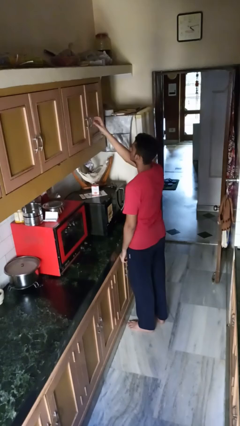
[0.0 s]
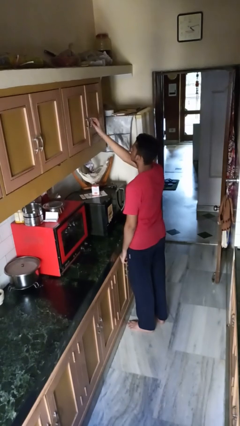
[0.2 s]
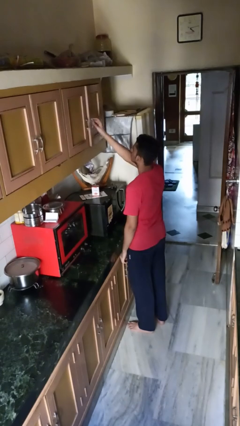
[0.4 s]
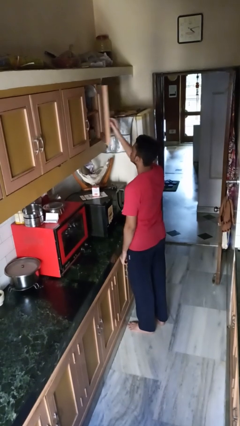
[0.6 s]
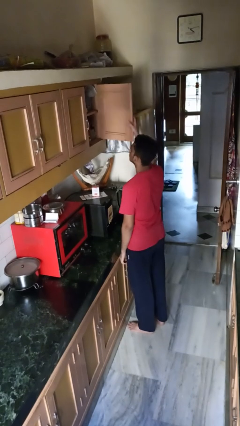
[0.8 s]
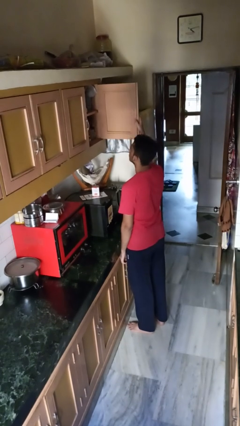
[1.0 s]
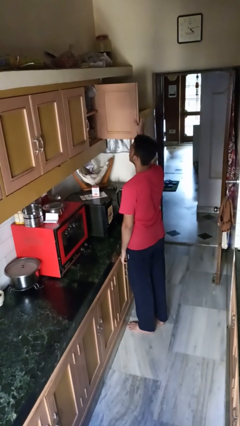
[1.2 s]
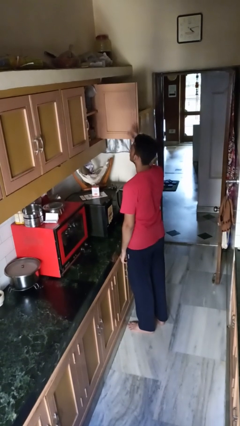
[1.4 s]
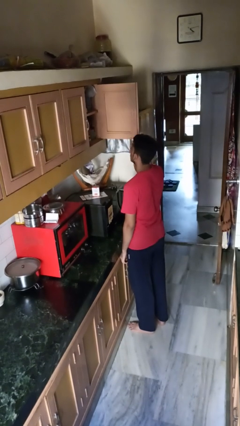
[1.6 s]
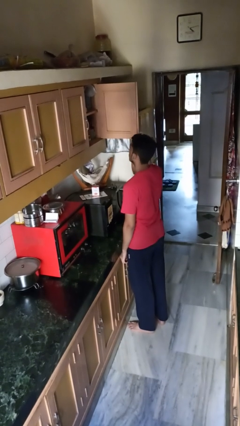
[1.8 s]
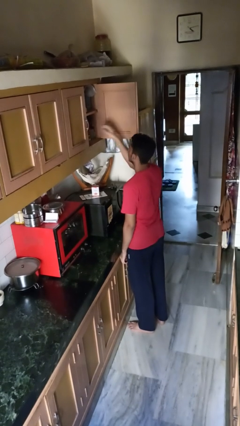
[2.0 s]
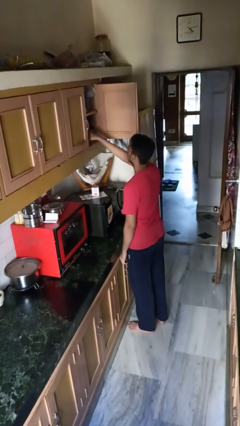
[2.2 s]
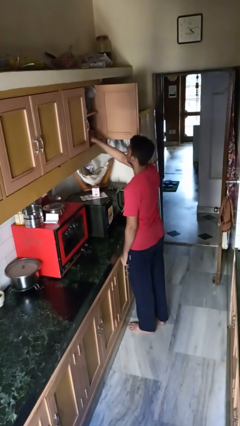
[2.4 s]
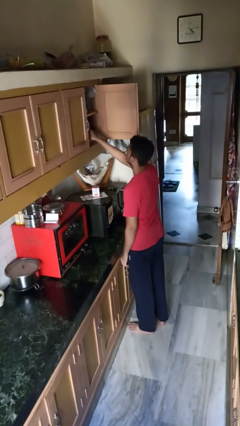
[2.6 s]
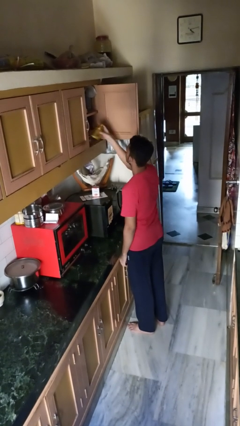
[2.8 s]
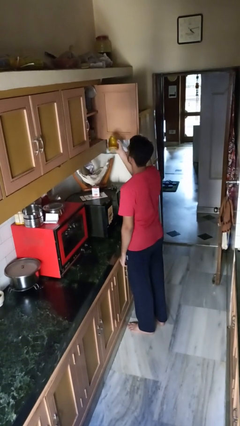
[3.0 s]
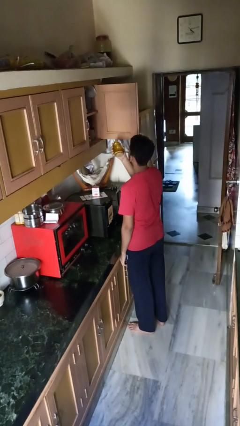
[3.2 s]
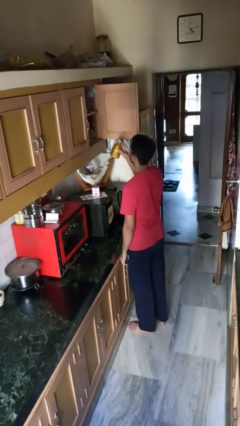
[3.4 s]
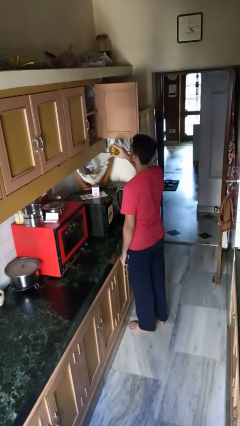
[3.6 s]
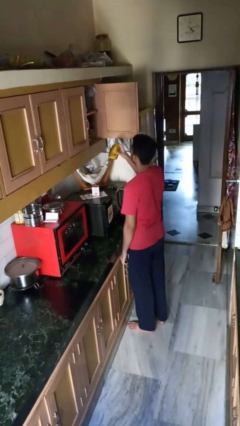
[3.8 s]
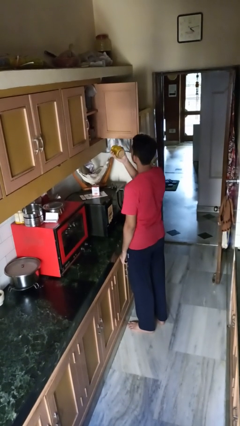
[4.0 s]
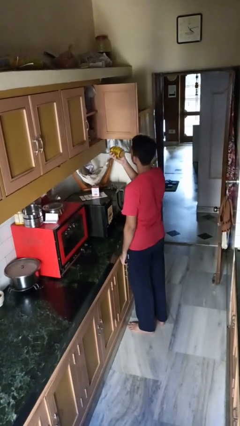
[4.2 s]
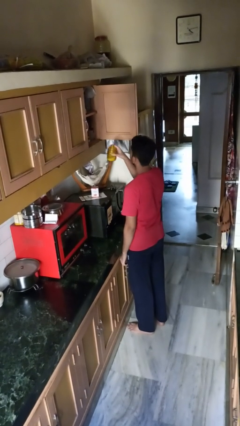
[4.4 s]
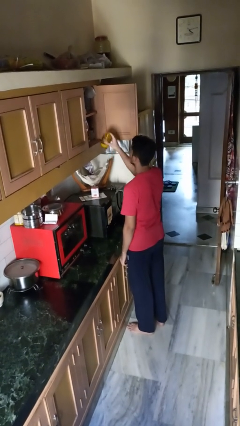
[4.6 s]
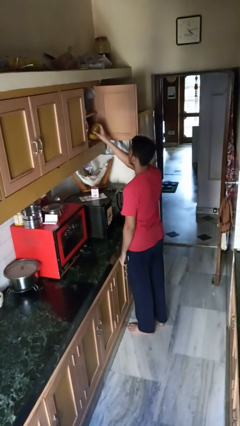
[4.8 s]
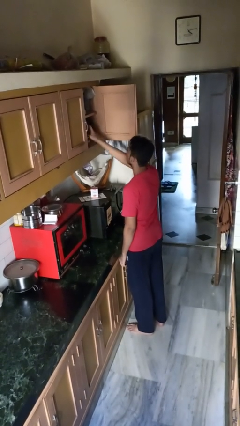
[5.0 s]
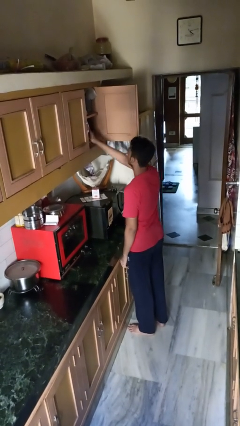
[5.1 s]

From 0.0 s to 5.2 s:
person takes object from cabinet

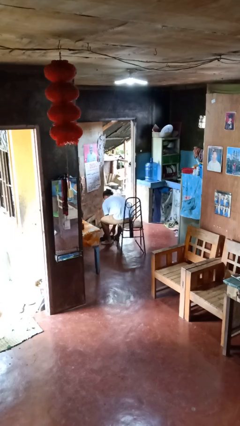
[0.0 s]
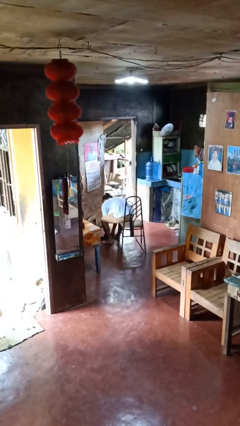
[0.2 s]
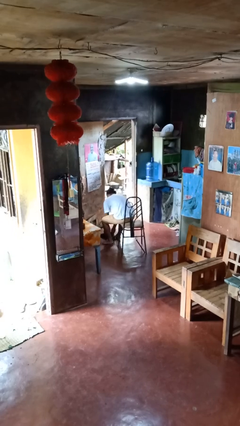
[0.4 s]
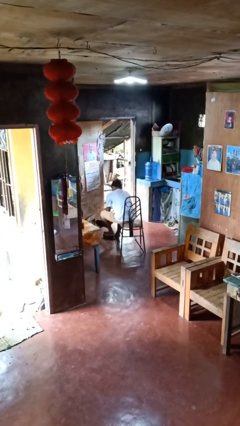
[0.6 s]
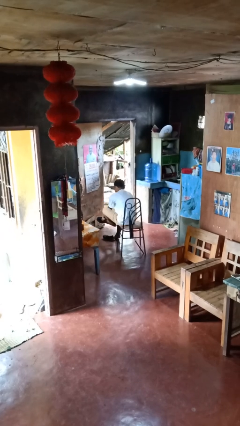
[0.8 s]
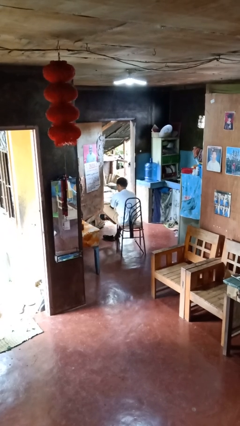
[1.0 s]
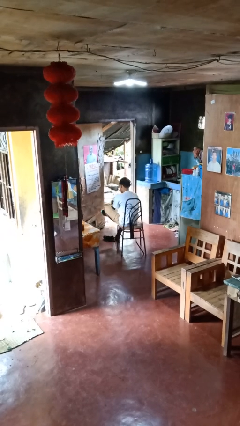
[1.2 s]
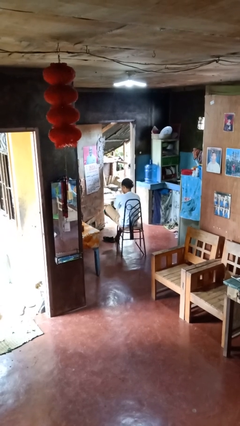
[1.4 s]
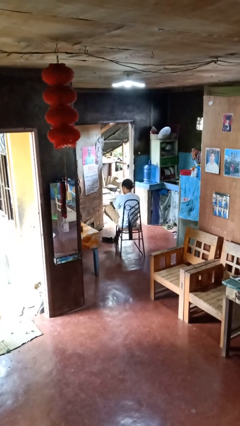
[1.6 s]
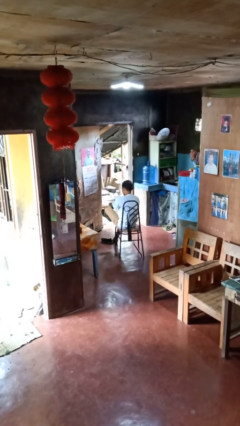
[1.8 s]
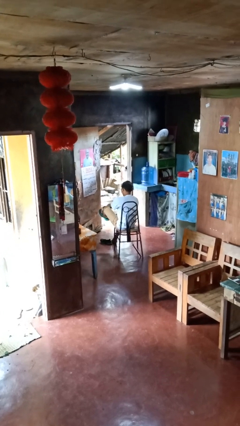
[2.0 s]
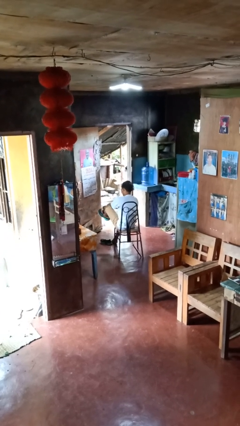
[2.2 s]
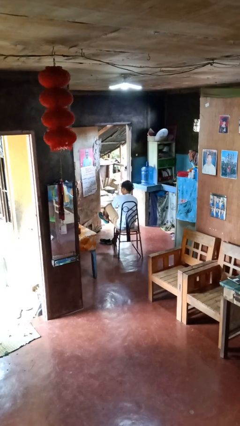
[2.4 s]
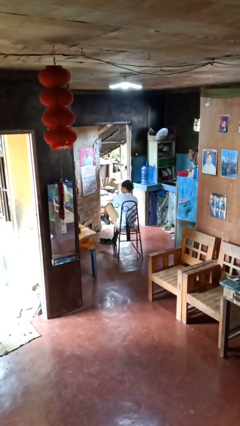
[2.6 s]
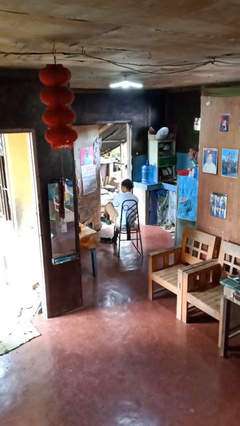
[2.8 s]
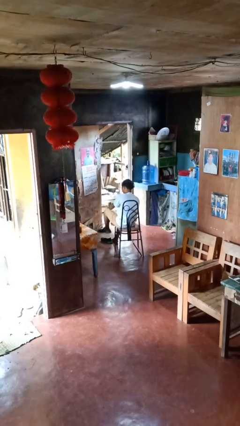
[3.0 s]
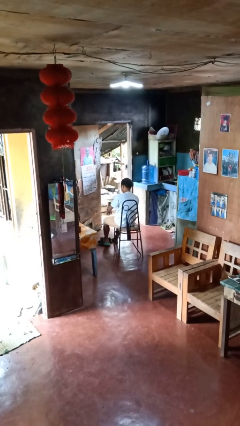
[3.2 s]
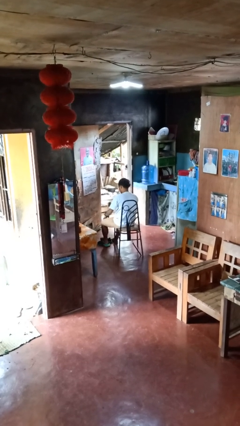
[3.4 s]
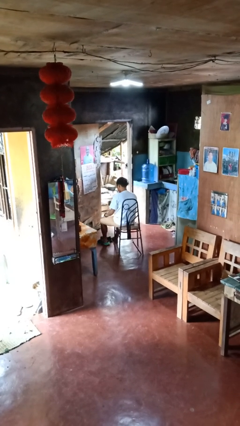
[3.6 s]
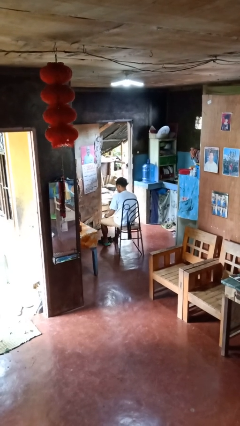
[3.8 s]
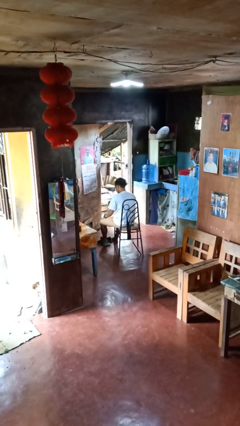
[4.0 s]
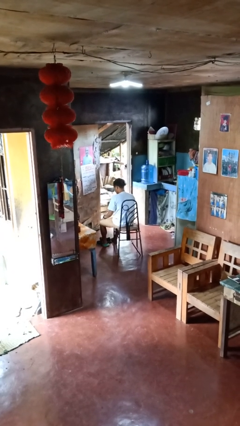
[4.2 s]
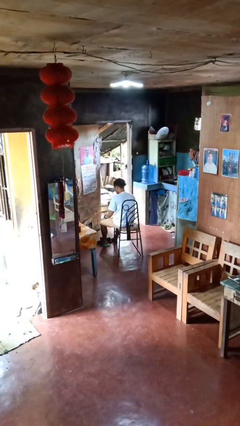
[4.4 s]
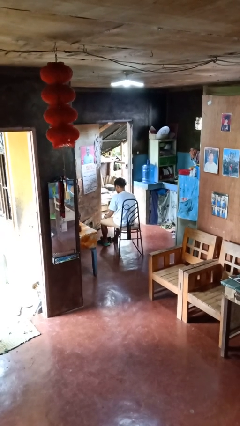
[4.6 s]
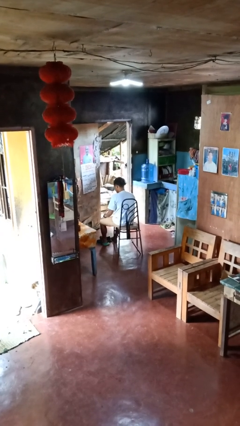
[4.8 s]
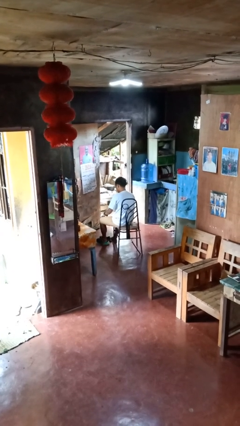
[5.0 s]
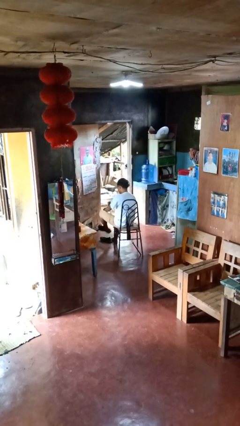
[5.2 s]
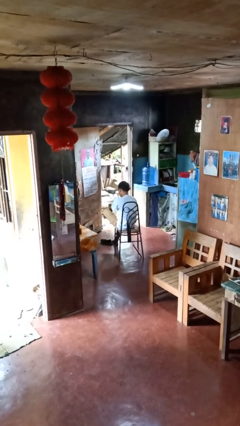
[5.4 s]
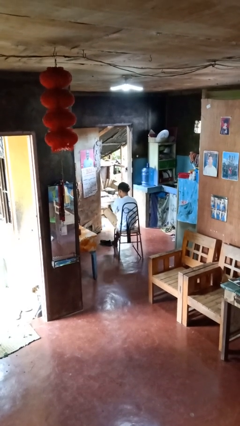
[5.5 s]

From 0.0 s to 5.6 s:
person puts on shoes

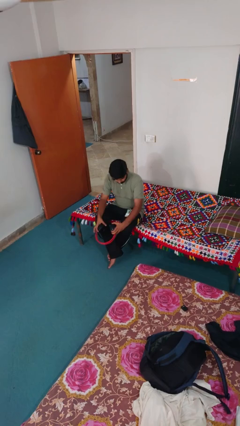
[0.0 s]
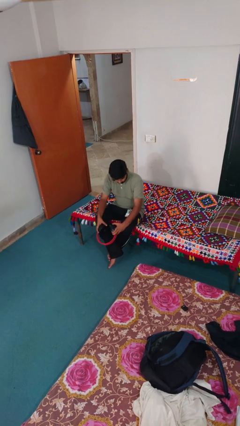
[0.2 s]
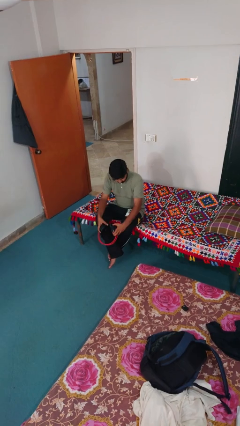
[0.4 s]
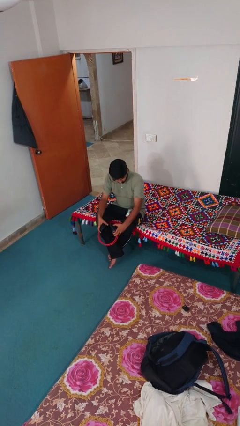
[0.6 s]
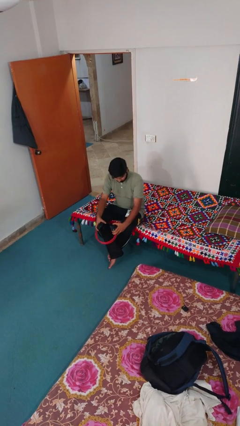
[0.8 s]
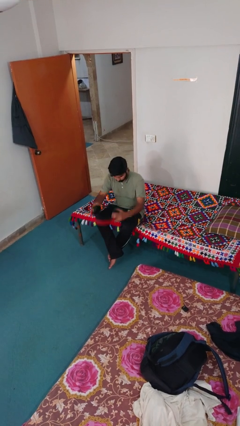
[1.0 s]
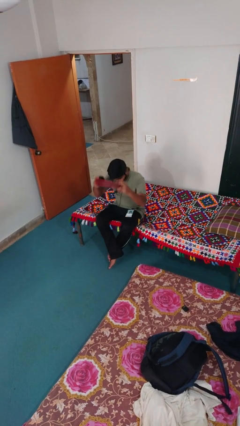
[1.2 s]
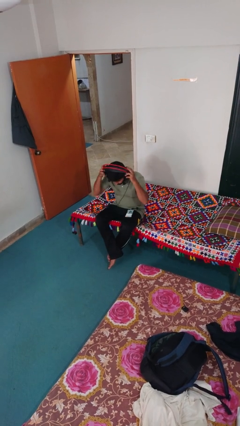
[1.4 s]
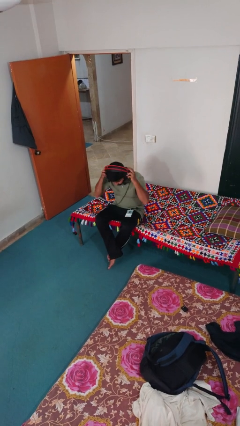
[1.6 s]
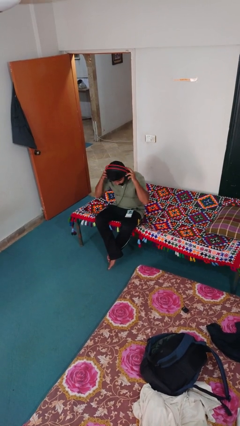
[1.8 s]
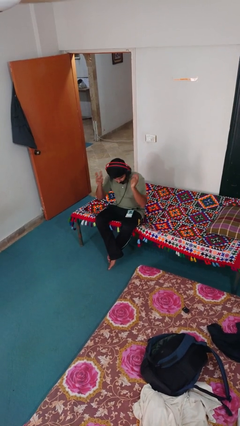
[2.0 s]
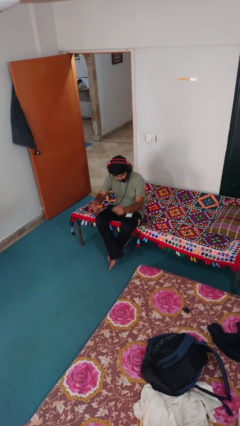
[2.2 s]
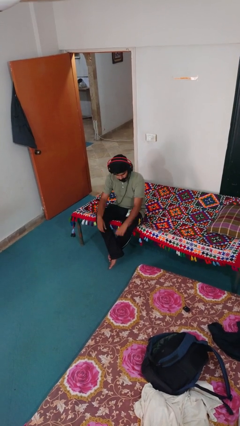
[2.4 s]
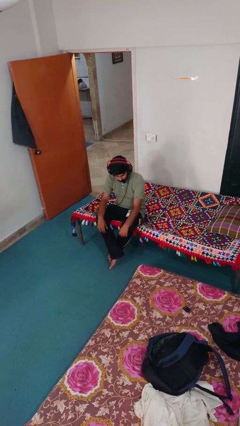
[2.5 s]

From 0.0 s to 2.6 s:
person puts on headphones

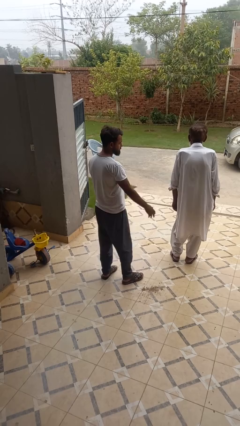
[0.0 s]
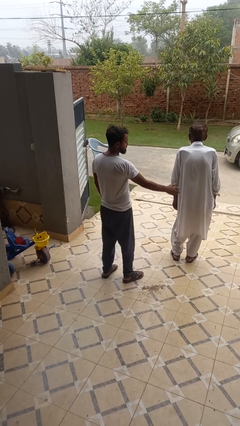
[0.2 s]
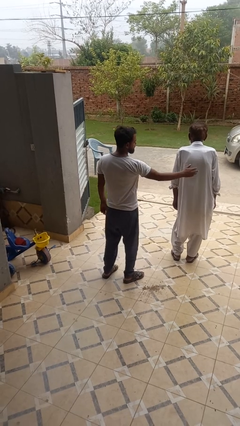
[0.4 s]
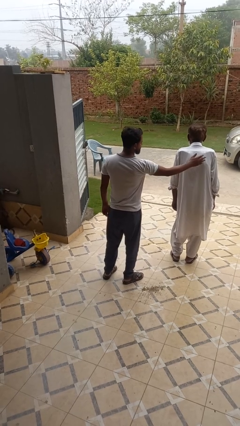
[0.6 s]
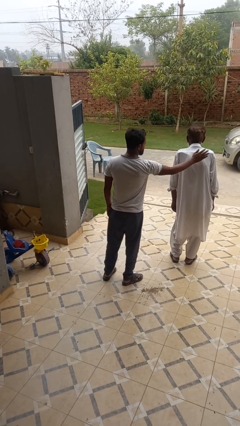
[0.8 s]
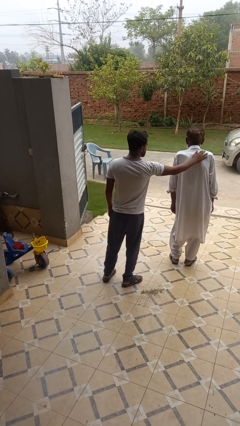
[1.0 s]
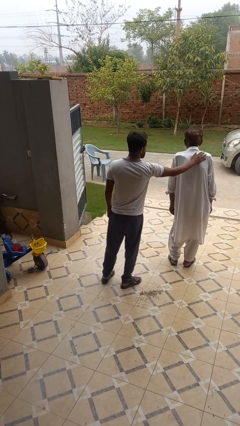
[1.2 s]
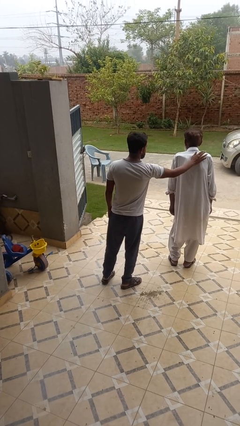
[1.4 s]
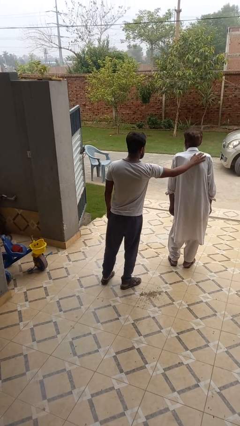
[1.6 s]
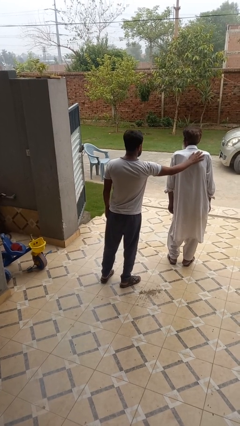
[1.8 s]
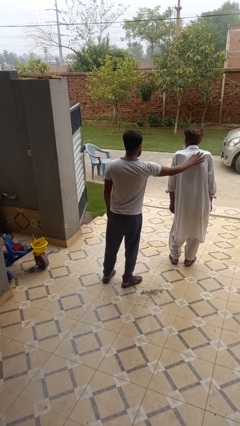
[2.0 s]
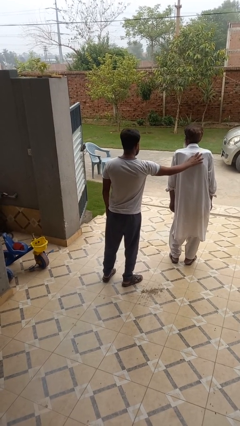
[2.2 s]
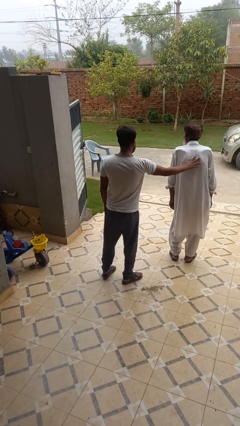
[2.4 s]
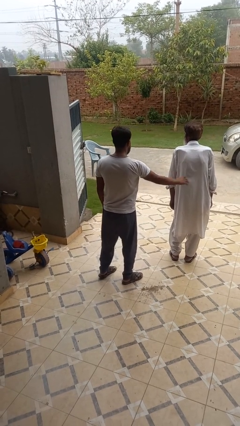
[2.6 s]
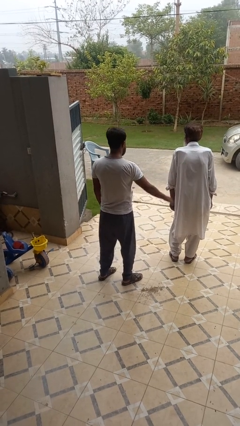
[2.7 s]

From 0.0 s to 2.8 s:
person touches back of person

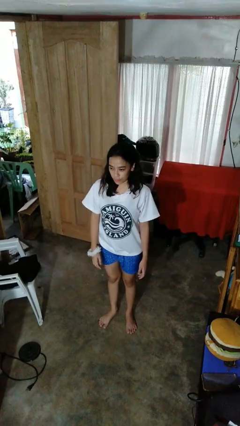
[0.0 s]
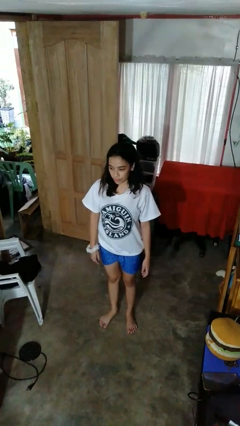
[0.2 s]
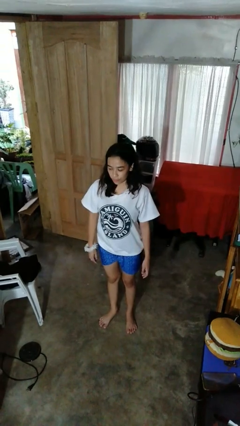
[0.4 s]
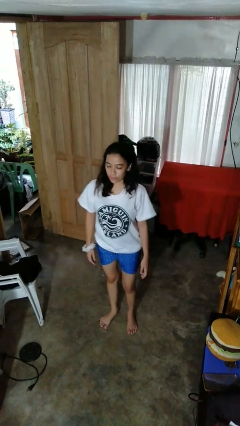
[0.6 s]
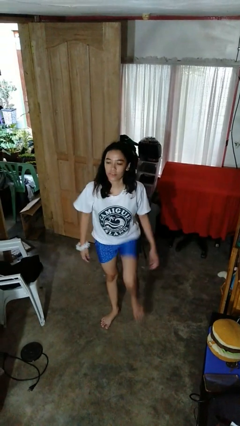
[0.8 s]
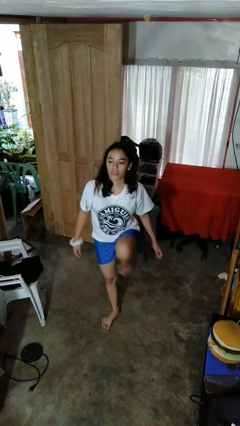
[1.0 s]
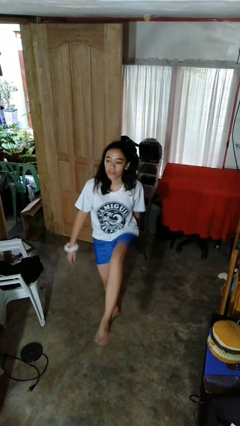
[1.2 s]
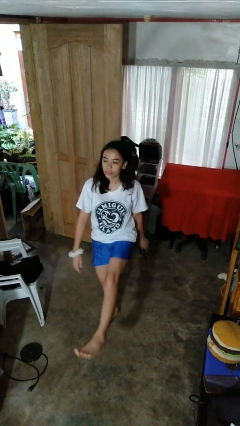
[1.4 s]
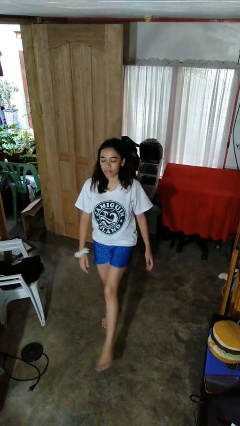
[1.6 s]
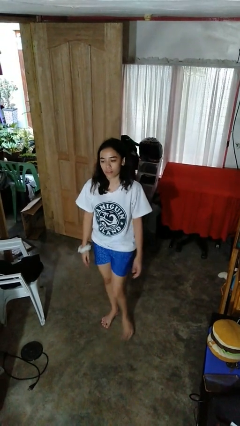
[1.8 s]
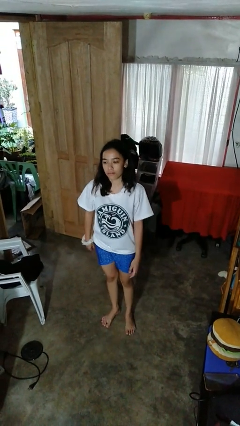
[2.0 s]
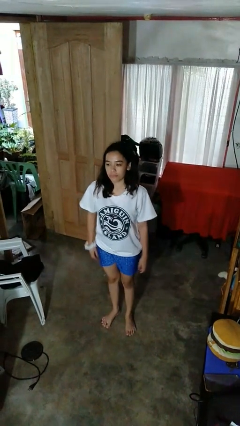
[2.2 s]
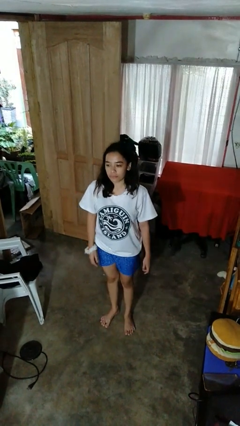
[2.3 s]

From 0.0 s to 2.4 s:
person karate kicks
